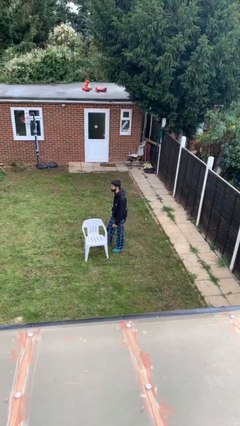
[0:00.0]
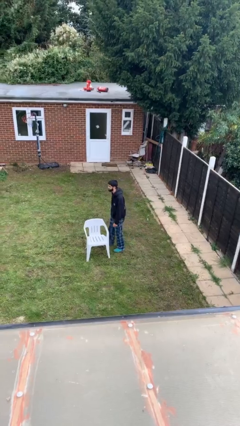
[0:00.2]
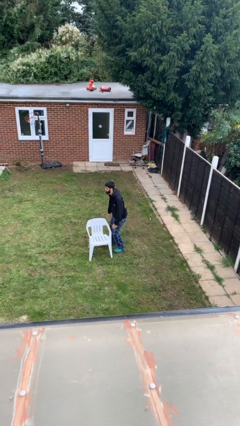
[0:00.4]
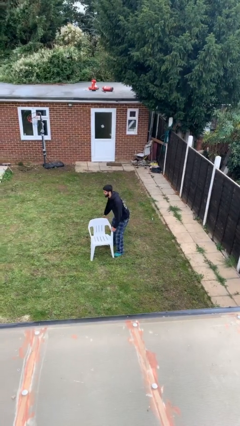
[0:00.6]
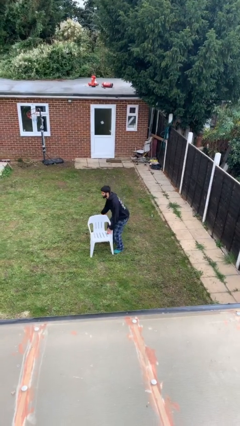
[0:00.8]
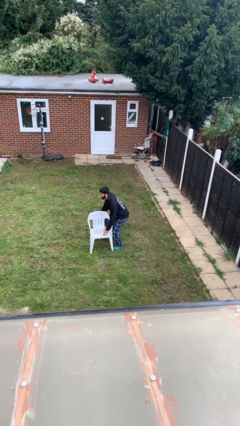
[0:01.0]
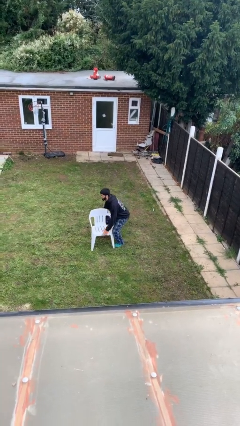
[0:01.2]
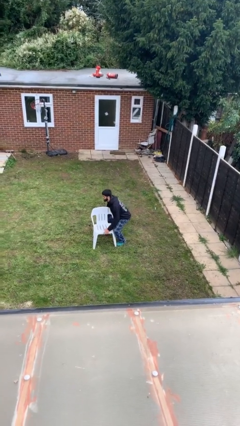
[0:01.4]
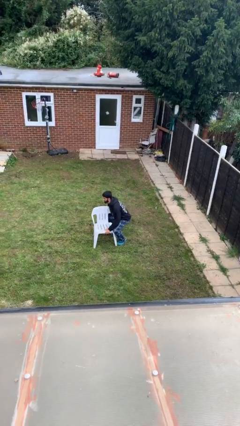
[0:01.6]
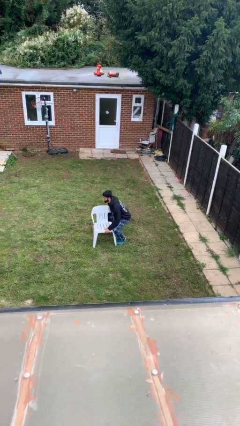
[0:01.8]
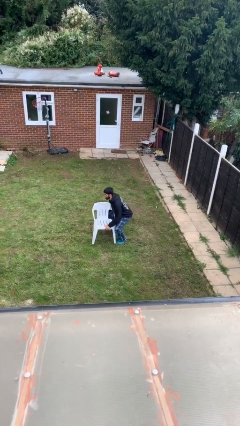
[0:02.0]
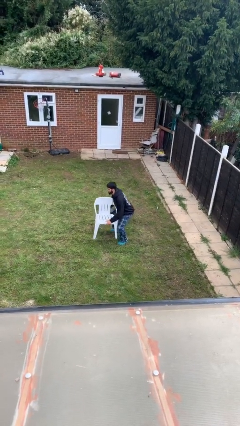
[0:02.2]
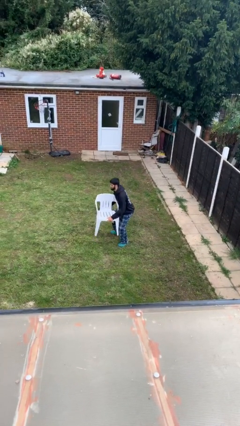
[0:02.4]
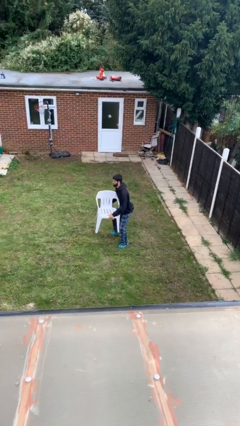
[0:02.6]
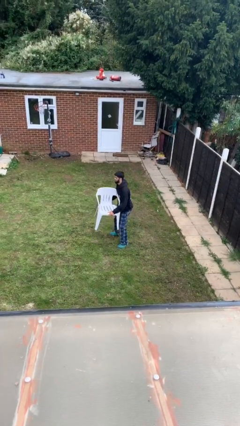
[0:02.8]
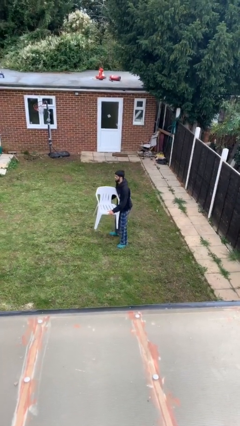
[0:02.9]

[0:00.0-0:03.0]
person picks up object from floor

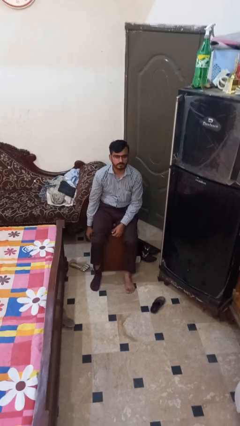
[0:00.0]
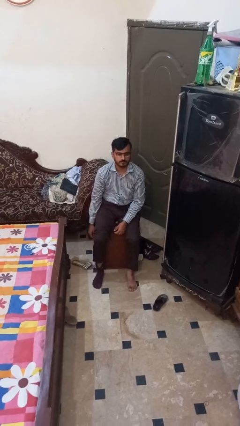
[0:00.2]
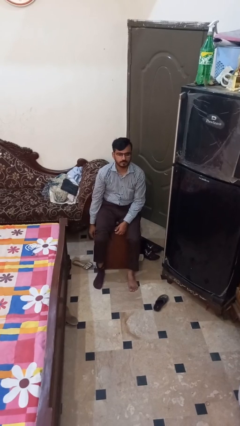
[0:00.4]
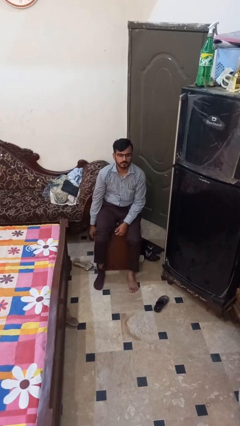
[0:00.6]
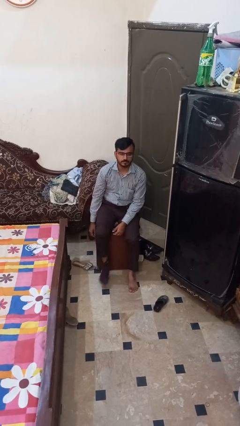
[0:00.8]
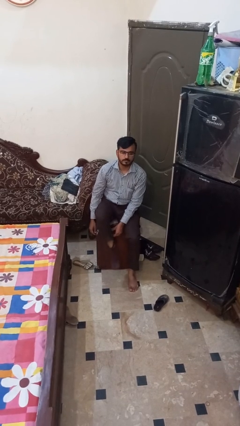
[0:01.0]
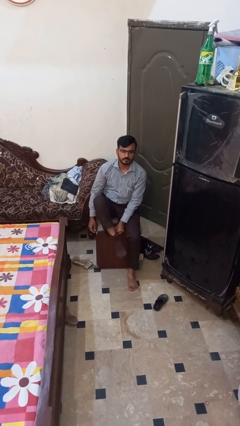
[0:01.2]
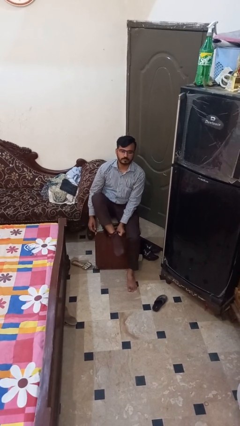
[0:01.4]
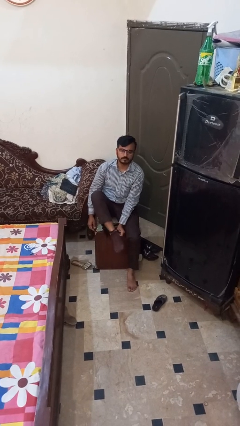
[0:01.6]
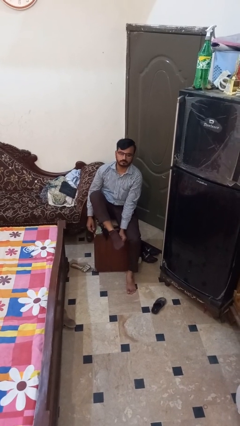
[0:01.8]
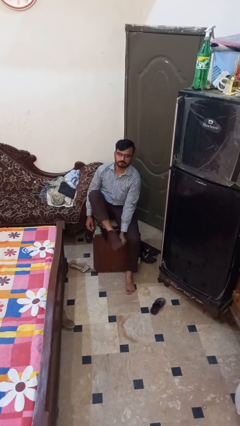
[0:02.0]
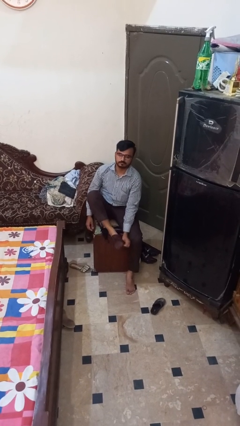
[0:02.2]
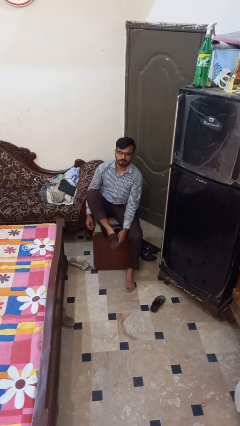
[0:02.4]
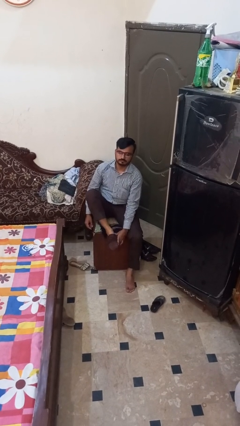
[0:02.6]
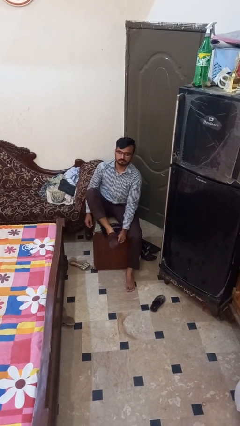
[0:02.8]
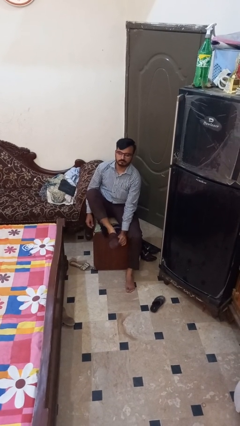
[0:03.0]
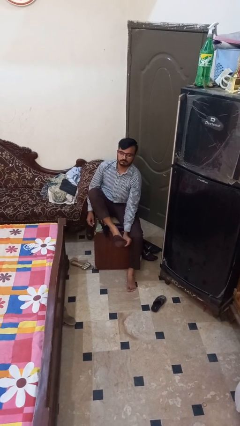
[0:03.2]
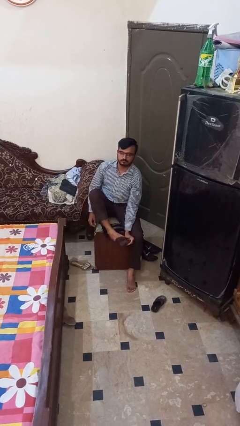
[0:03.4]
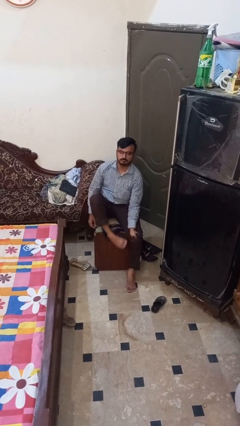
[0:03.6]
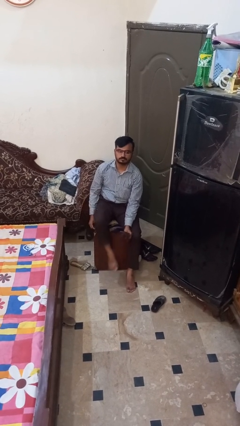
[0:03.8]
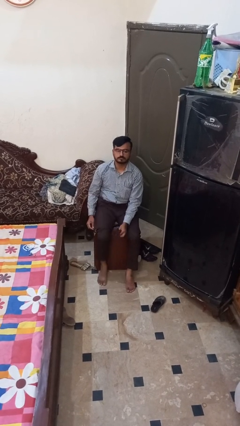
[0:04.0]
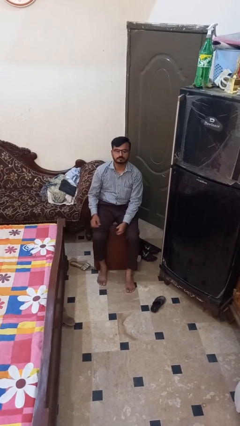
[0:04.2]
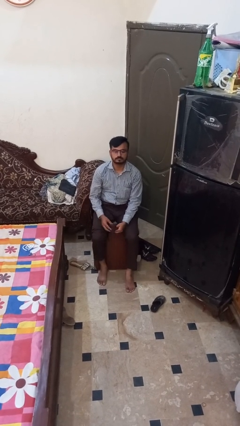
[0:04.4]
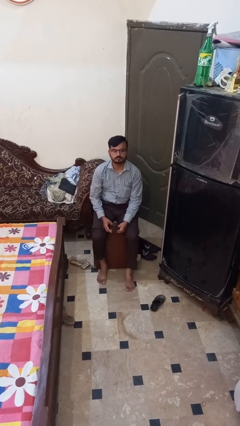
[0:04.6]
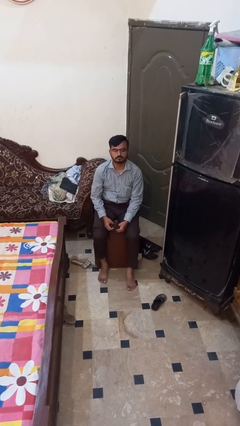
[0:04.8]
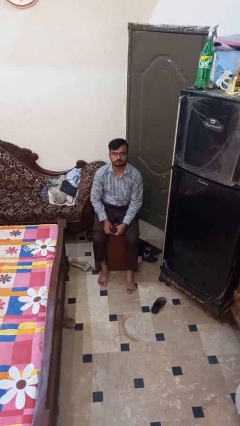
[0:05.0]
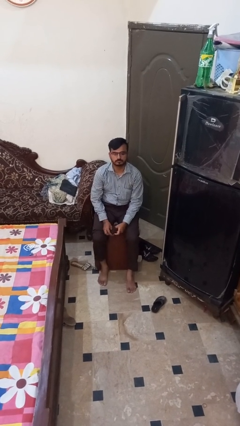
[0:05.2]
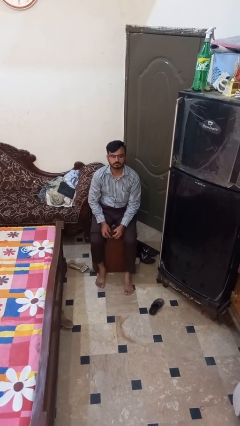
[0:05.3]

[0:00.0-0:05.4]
person takes off socks

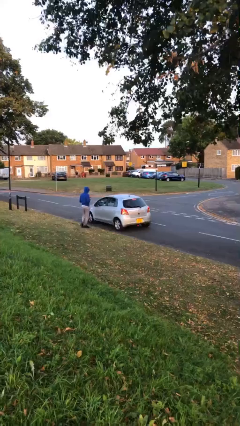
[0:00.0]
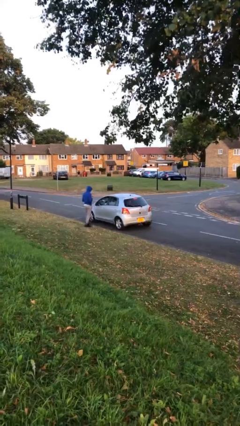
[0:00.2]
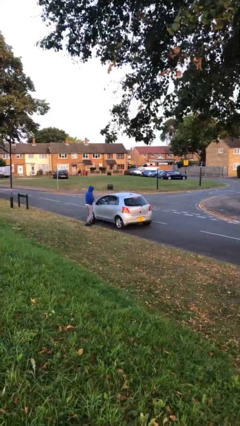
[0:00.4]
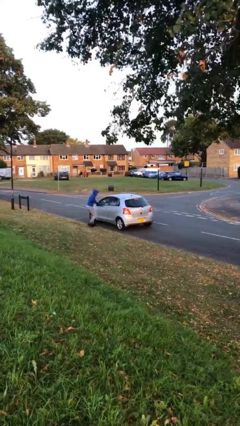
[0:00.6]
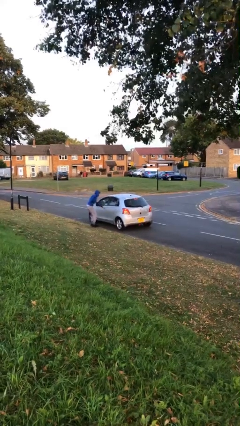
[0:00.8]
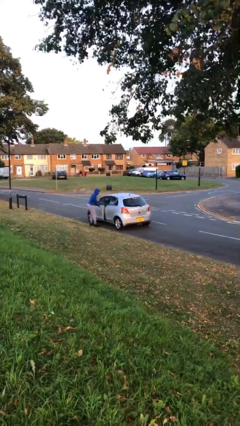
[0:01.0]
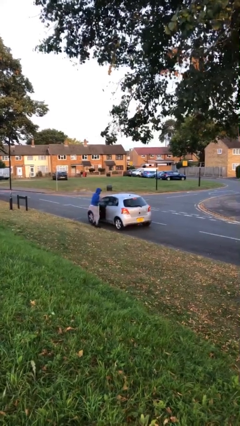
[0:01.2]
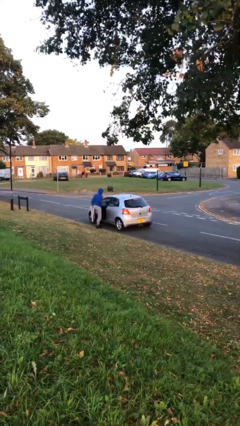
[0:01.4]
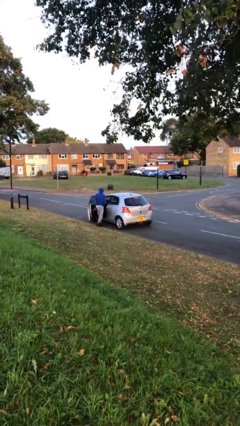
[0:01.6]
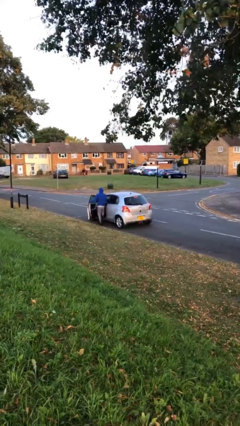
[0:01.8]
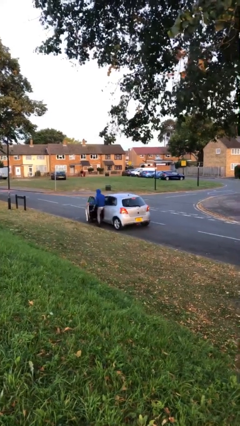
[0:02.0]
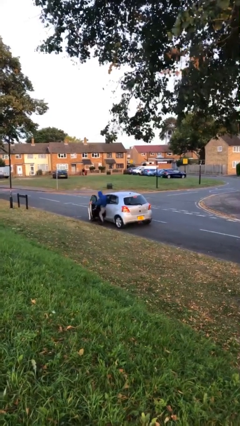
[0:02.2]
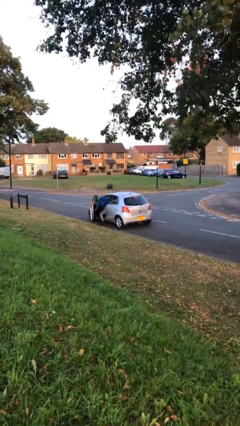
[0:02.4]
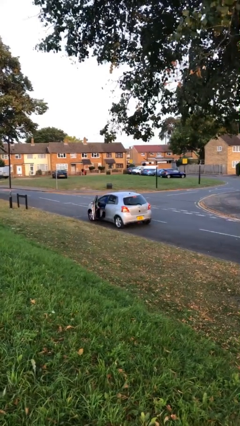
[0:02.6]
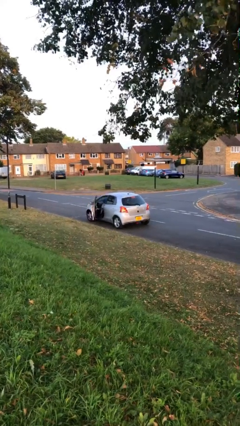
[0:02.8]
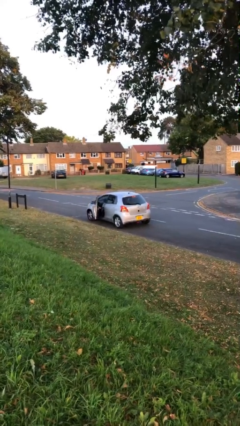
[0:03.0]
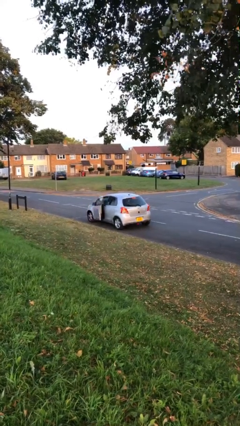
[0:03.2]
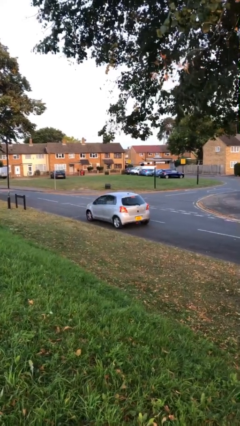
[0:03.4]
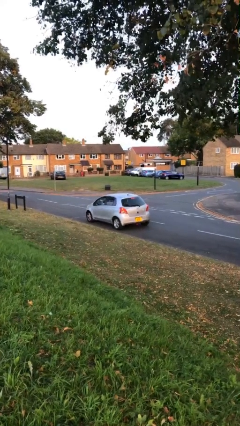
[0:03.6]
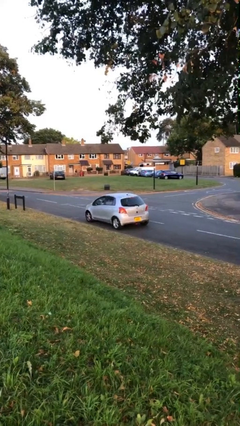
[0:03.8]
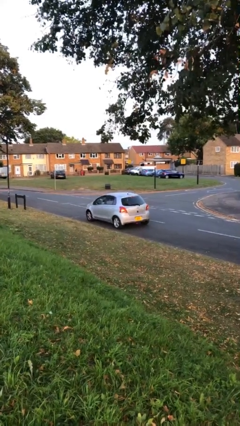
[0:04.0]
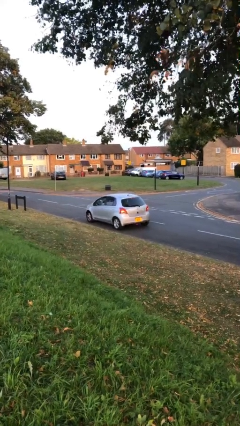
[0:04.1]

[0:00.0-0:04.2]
car picks up person

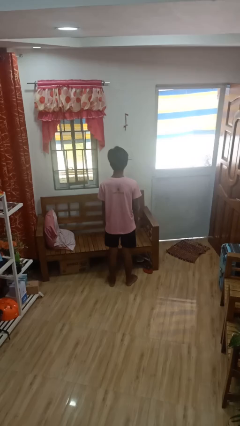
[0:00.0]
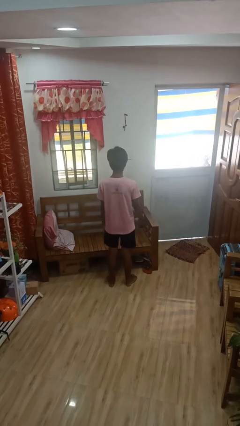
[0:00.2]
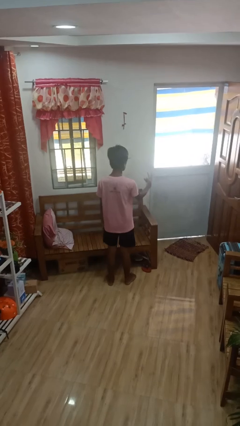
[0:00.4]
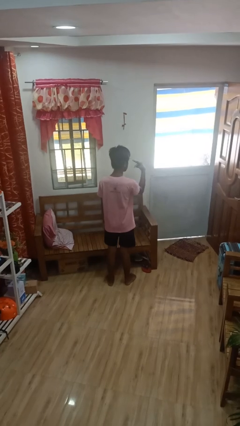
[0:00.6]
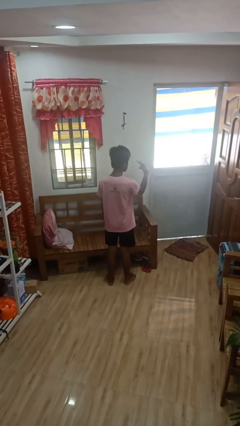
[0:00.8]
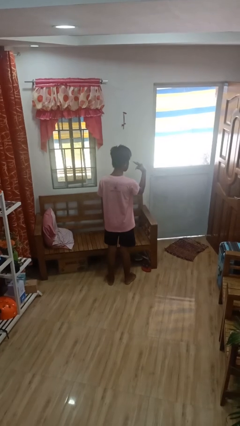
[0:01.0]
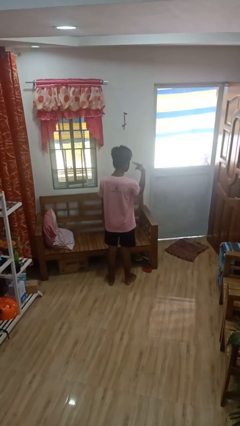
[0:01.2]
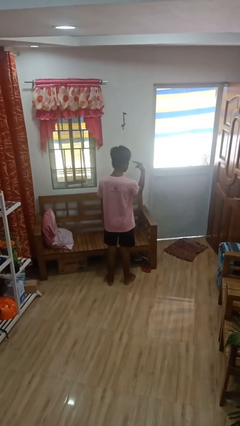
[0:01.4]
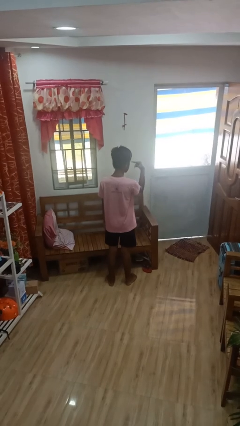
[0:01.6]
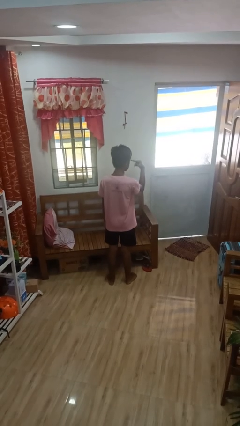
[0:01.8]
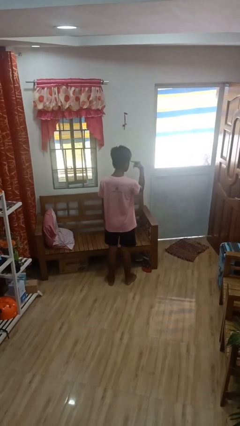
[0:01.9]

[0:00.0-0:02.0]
person gestures watch closely

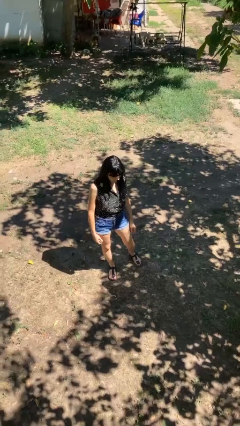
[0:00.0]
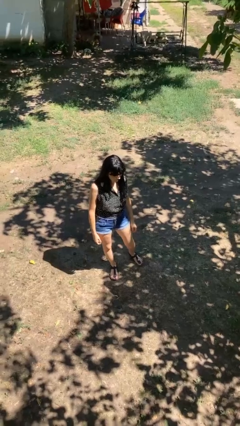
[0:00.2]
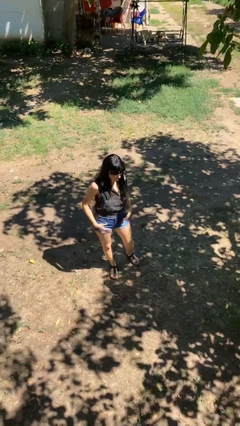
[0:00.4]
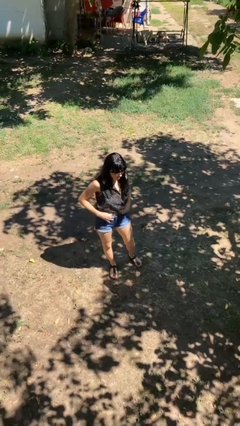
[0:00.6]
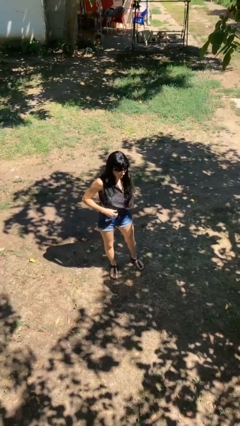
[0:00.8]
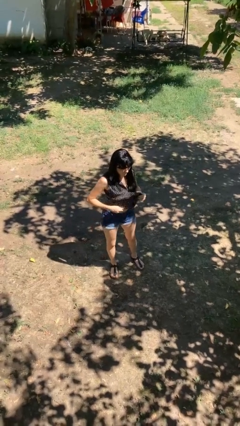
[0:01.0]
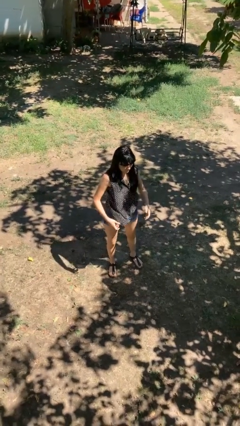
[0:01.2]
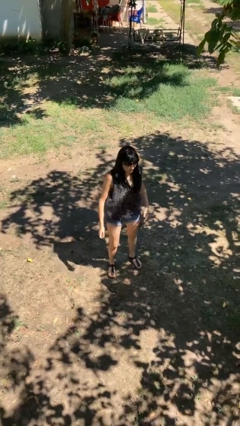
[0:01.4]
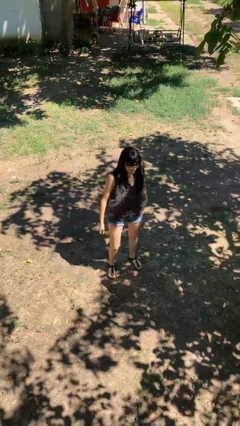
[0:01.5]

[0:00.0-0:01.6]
person untucks shirt

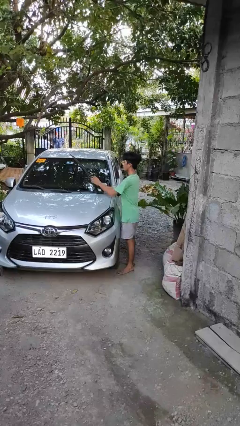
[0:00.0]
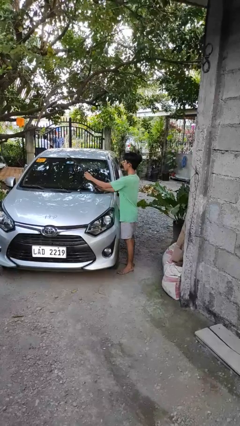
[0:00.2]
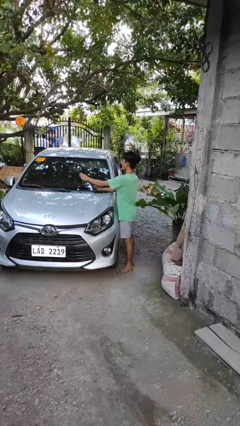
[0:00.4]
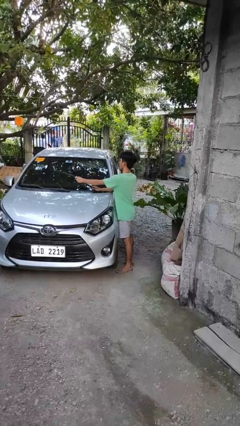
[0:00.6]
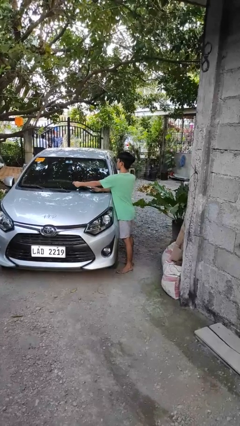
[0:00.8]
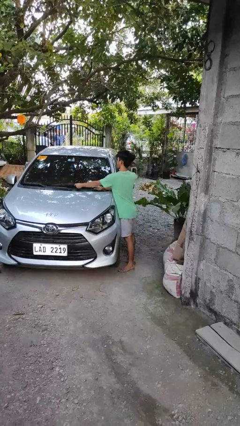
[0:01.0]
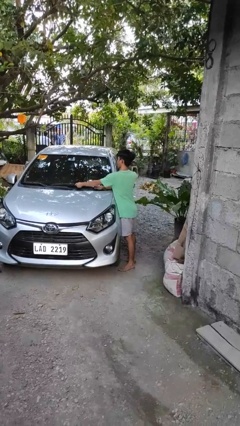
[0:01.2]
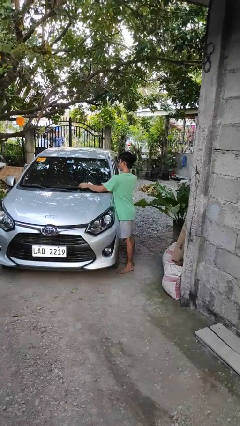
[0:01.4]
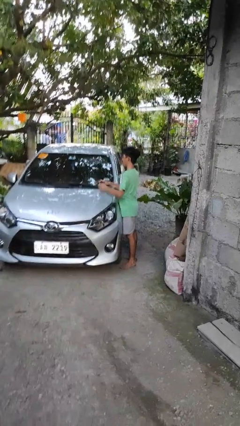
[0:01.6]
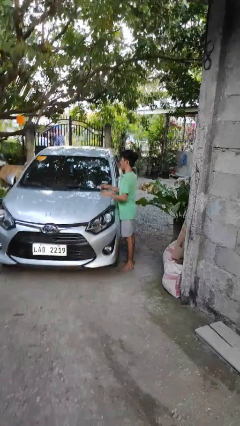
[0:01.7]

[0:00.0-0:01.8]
person flips down car wipers
